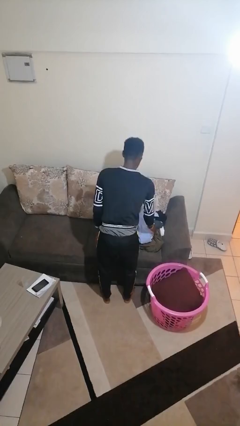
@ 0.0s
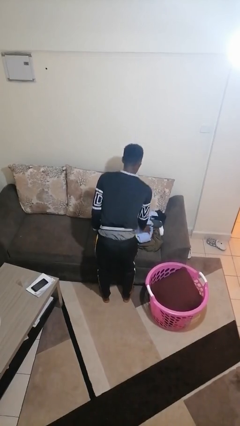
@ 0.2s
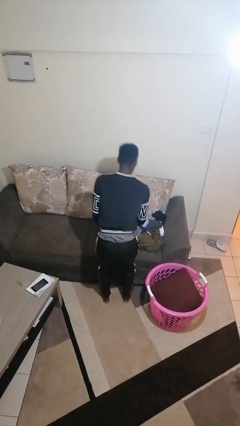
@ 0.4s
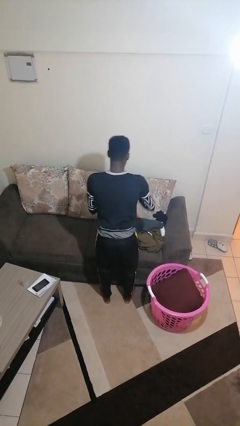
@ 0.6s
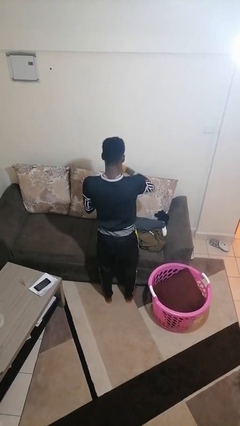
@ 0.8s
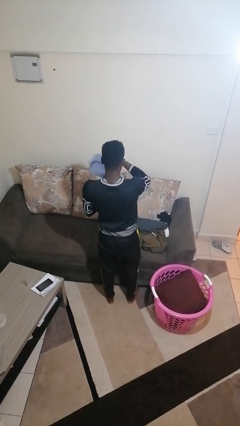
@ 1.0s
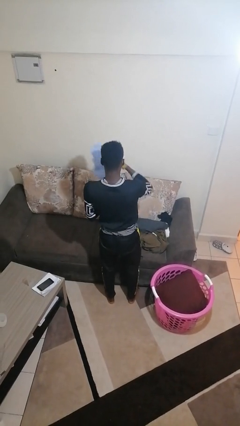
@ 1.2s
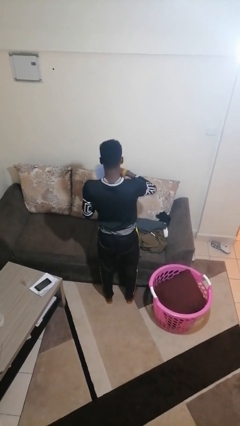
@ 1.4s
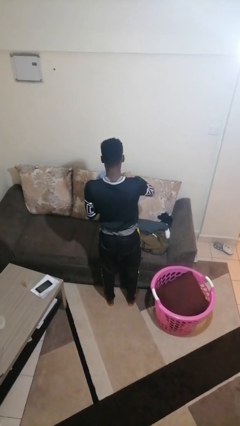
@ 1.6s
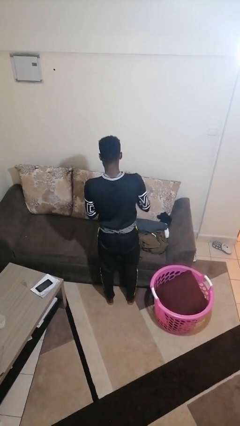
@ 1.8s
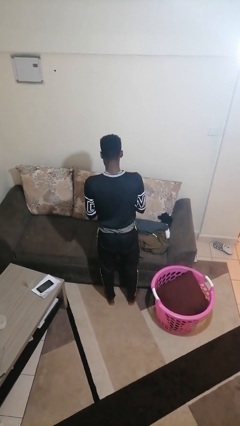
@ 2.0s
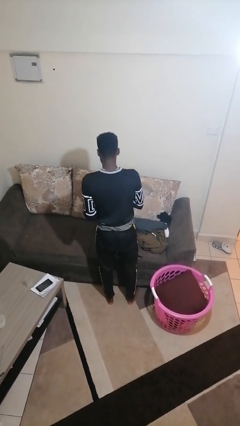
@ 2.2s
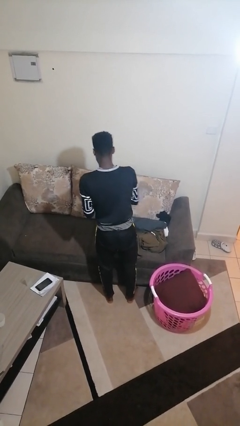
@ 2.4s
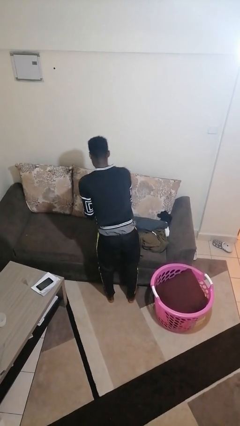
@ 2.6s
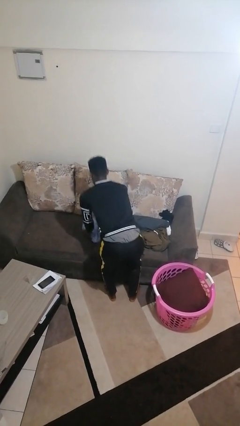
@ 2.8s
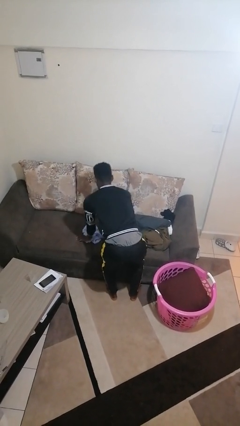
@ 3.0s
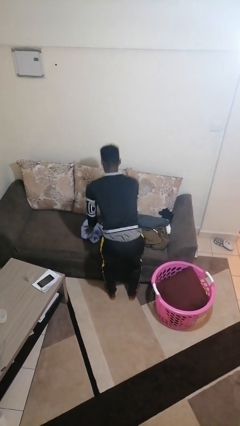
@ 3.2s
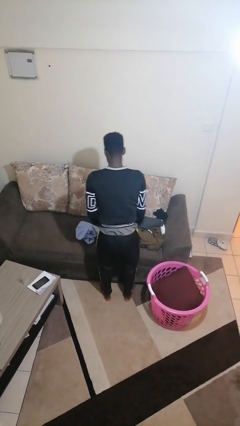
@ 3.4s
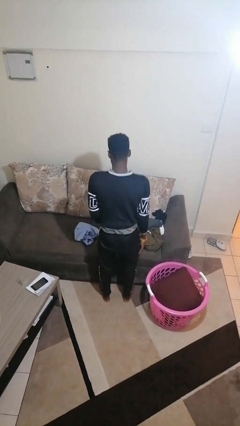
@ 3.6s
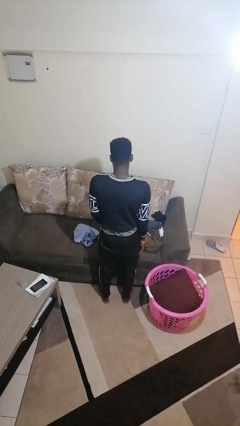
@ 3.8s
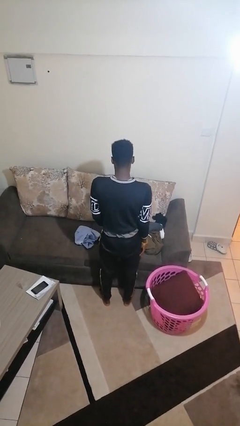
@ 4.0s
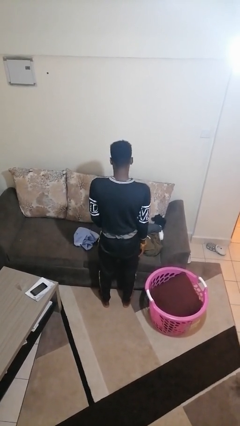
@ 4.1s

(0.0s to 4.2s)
person folds shirt

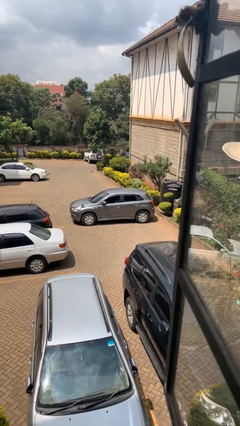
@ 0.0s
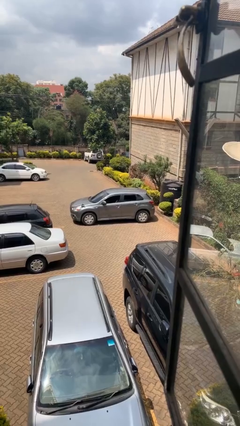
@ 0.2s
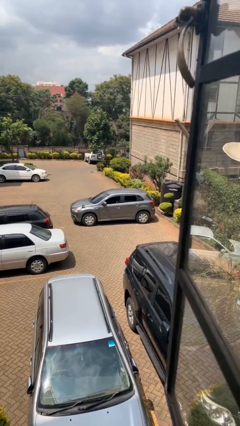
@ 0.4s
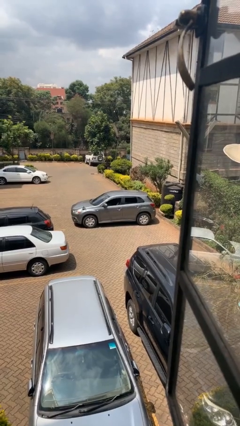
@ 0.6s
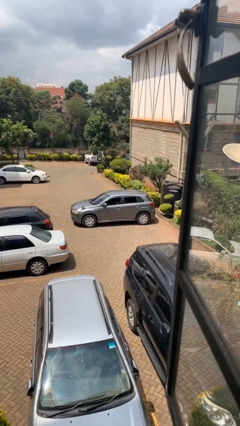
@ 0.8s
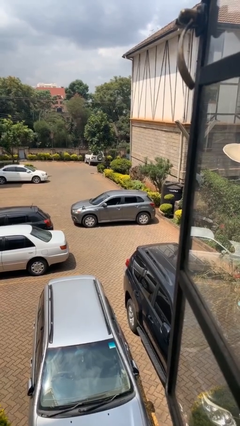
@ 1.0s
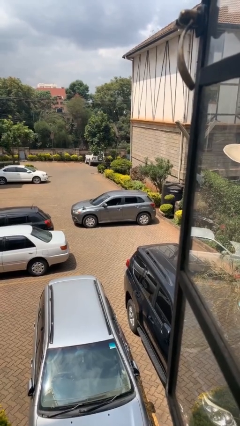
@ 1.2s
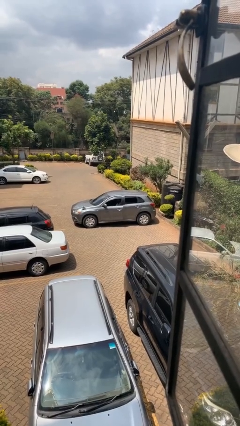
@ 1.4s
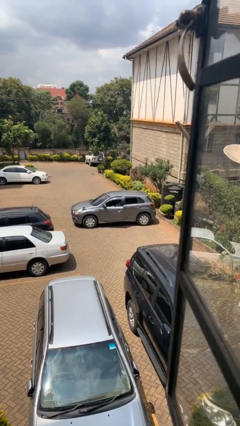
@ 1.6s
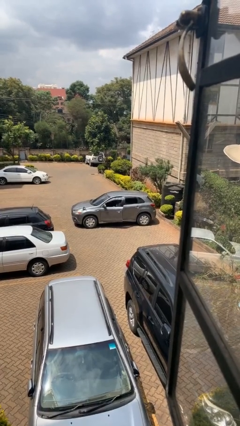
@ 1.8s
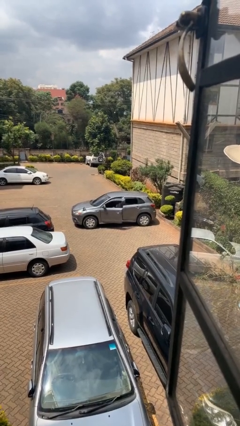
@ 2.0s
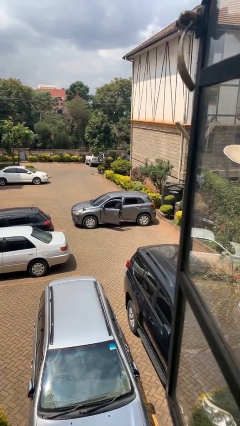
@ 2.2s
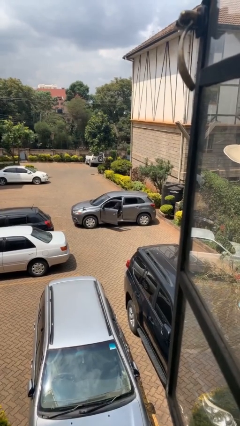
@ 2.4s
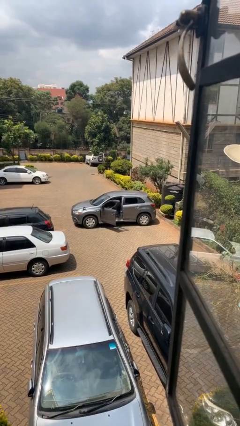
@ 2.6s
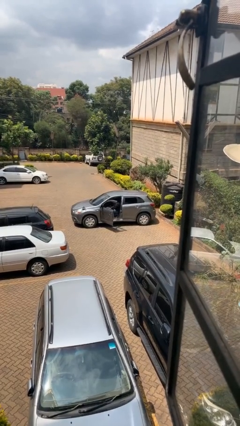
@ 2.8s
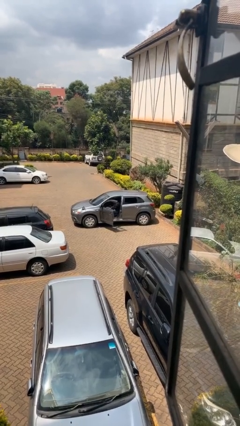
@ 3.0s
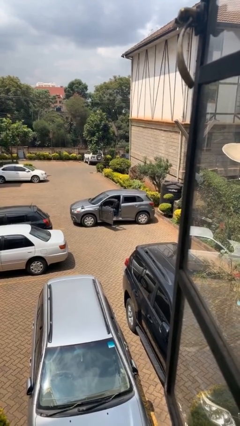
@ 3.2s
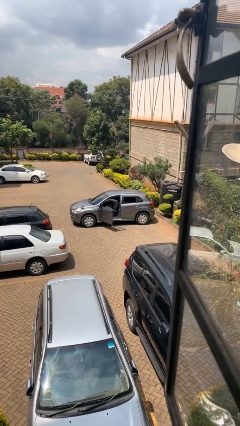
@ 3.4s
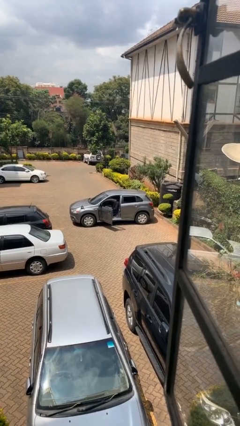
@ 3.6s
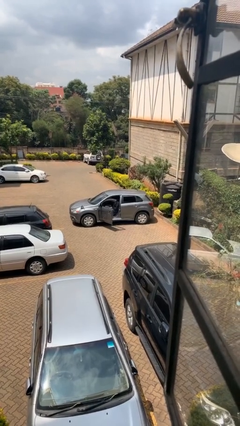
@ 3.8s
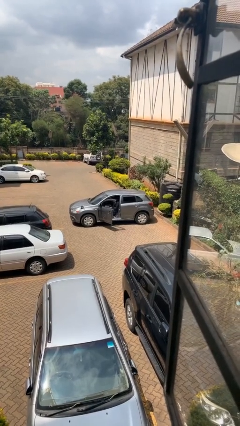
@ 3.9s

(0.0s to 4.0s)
person opens car door

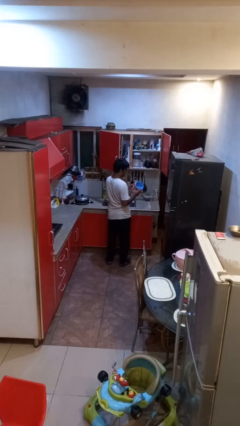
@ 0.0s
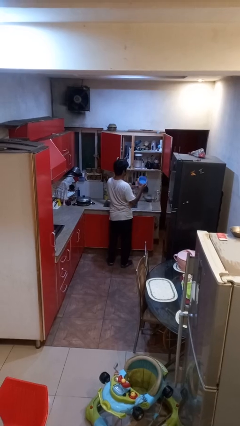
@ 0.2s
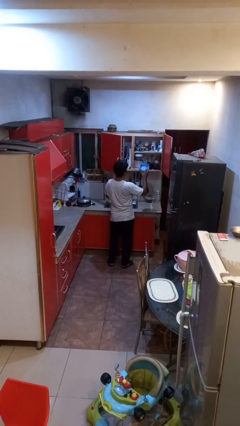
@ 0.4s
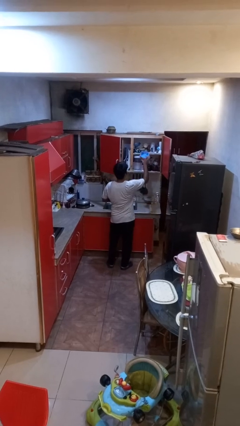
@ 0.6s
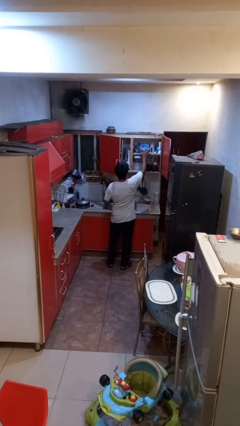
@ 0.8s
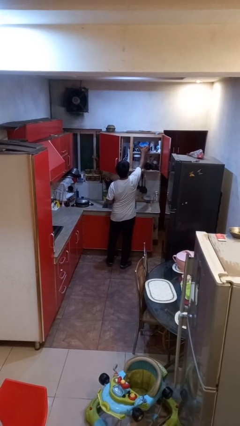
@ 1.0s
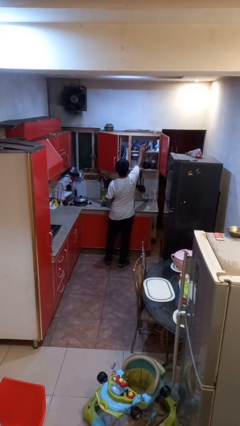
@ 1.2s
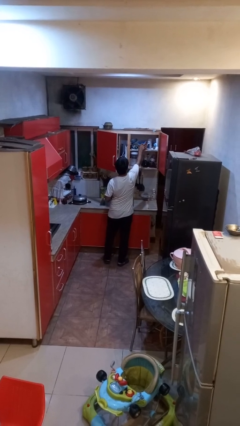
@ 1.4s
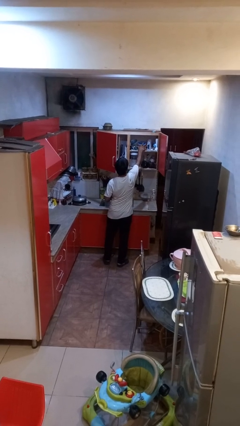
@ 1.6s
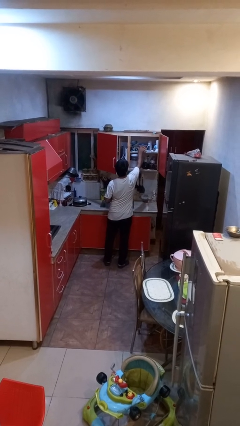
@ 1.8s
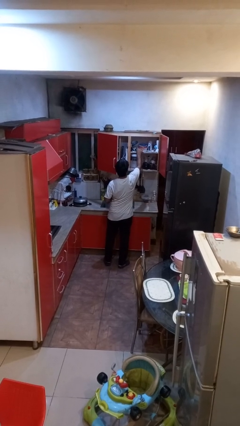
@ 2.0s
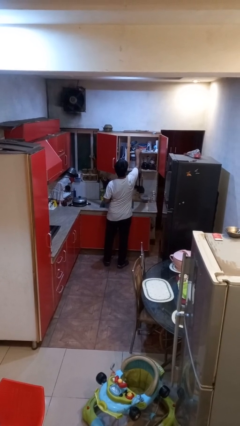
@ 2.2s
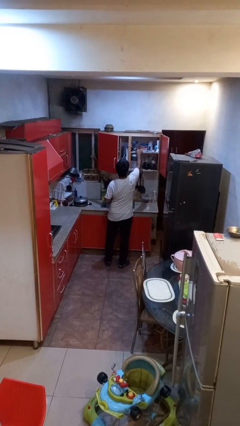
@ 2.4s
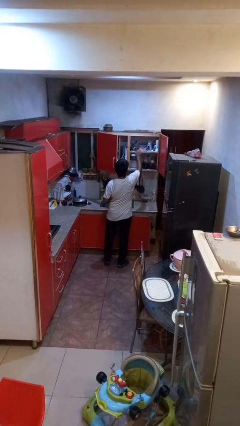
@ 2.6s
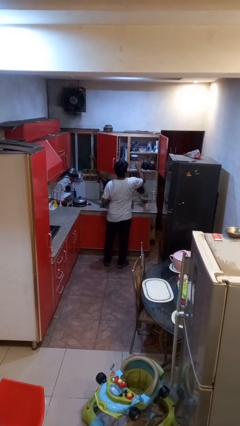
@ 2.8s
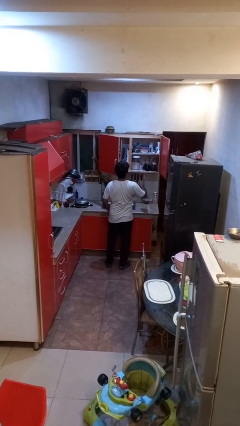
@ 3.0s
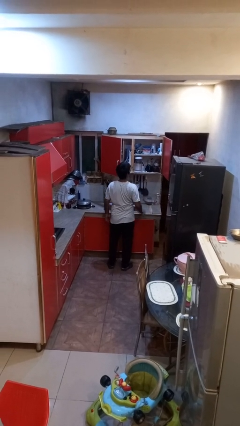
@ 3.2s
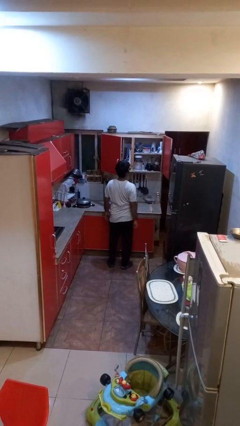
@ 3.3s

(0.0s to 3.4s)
person puts down object into cabinet

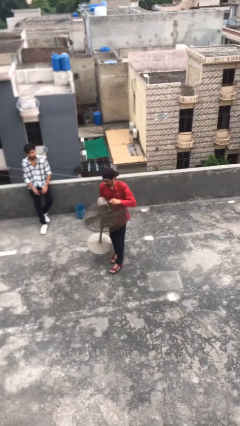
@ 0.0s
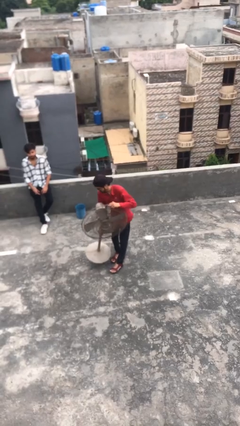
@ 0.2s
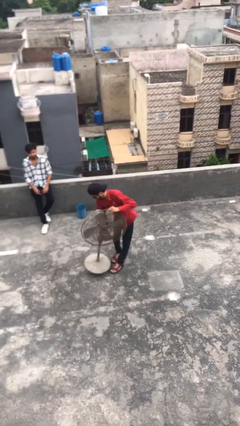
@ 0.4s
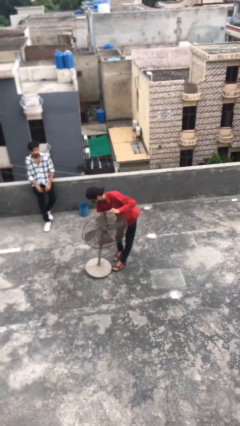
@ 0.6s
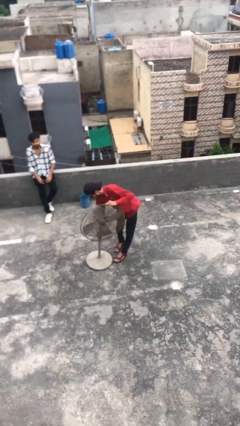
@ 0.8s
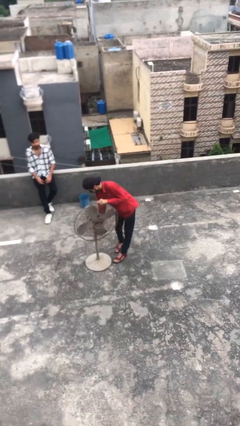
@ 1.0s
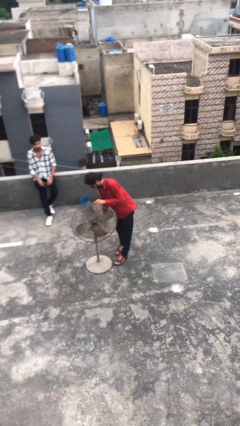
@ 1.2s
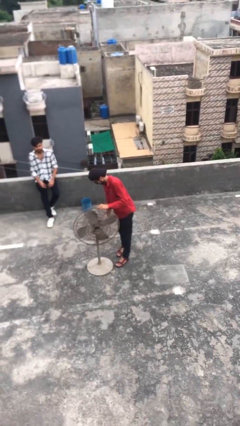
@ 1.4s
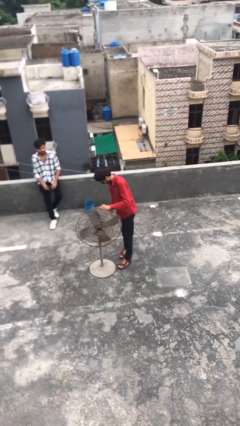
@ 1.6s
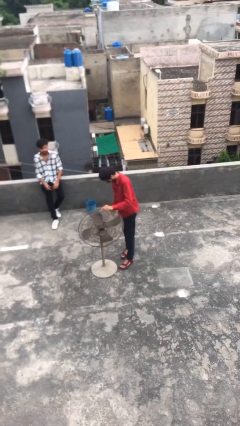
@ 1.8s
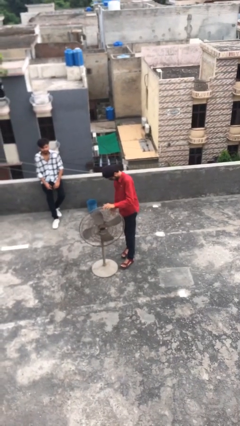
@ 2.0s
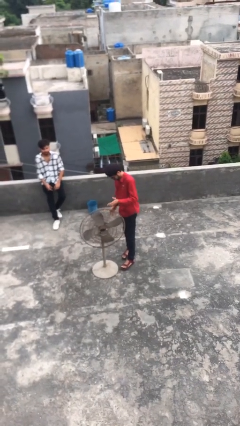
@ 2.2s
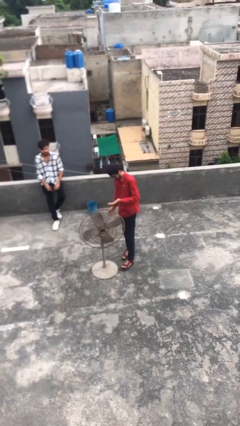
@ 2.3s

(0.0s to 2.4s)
person puts down object on floor

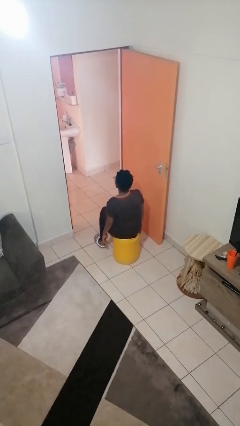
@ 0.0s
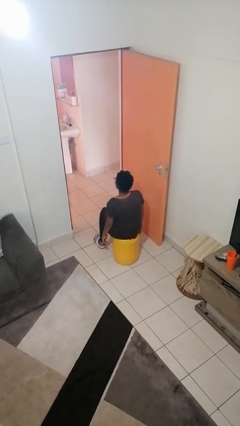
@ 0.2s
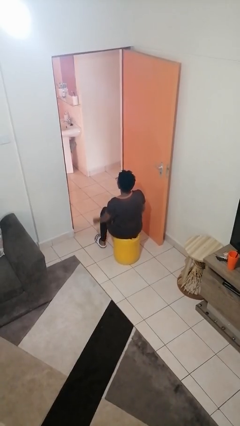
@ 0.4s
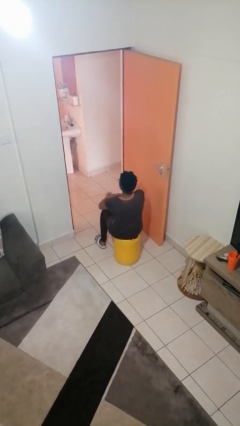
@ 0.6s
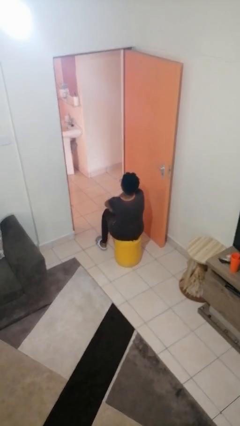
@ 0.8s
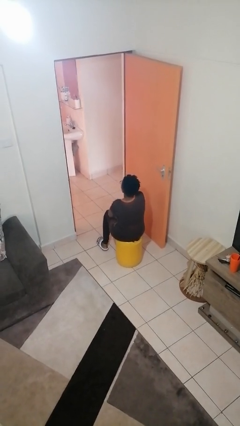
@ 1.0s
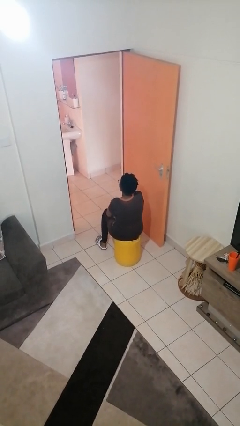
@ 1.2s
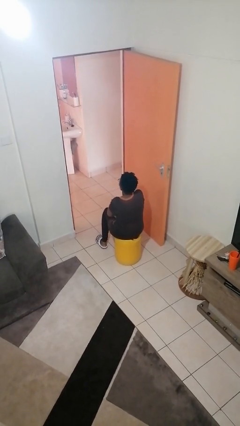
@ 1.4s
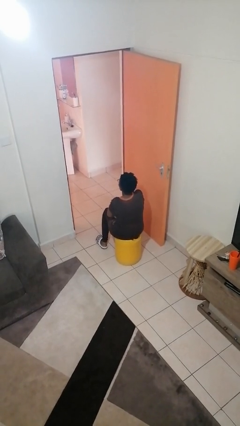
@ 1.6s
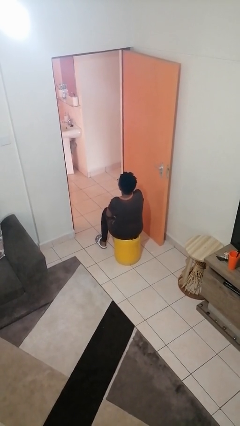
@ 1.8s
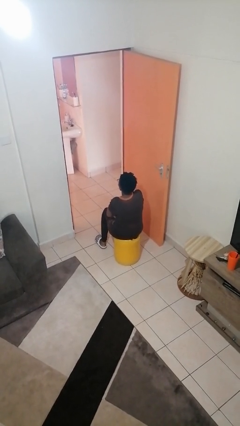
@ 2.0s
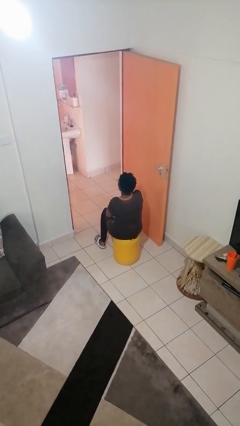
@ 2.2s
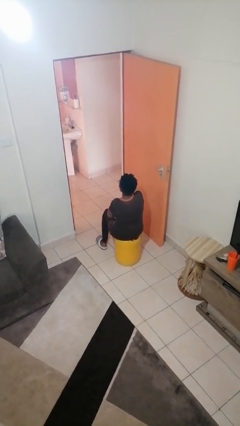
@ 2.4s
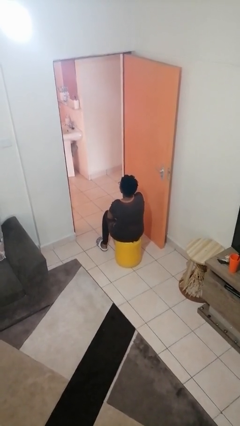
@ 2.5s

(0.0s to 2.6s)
person crosses arms

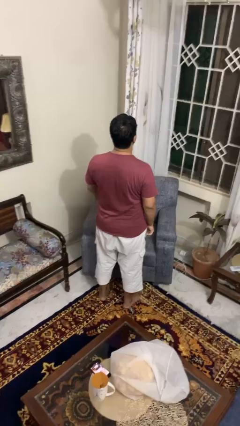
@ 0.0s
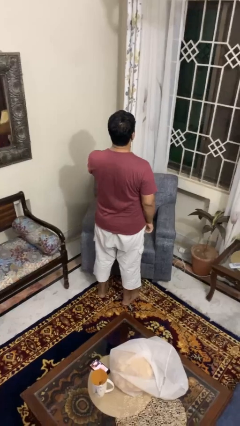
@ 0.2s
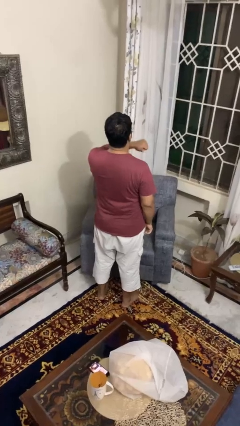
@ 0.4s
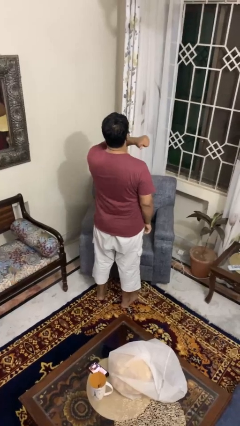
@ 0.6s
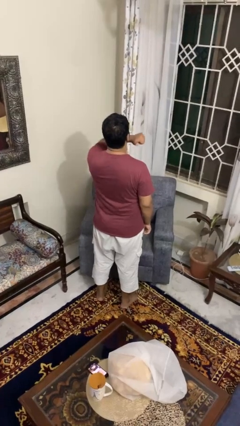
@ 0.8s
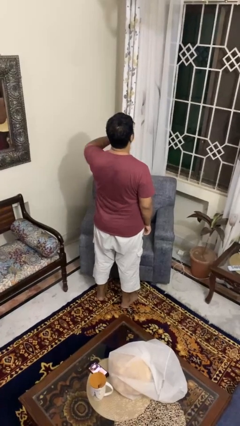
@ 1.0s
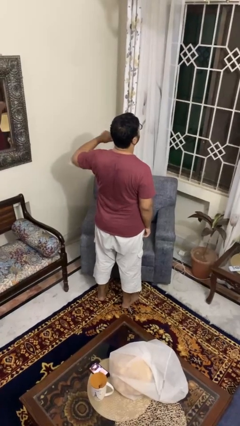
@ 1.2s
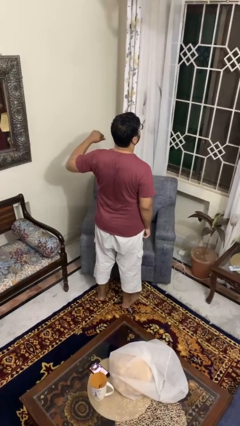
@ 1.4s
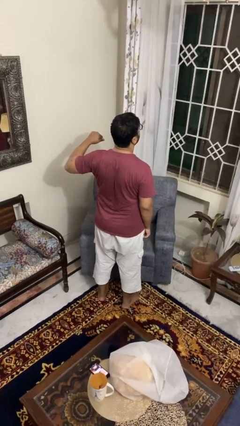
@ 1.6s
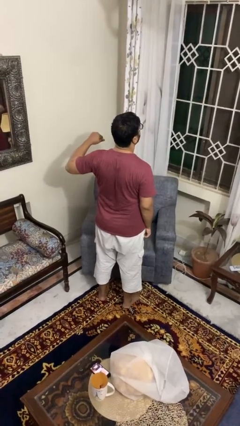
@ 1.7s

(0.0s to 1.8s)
person gestures cut
